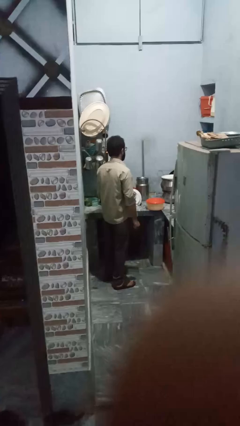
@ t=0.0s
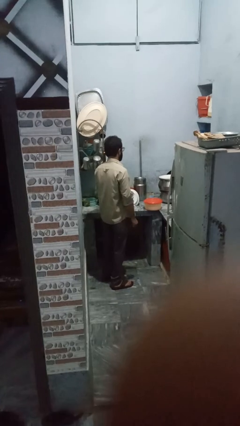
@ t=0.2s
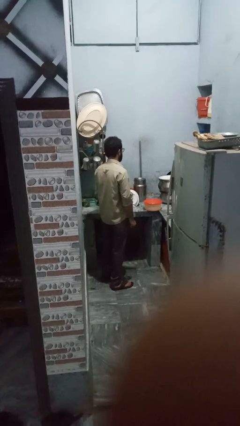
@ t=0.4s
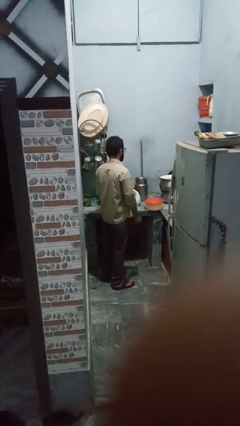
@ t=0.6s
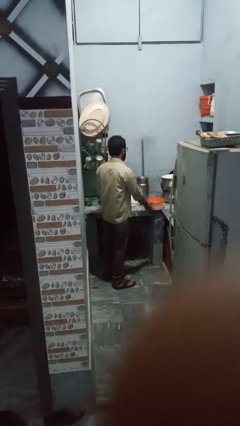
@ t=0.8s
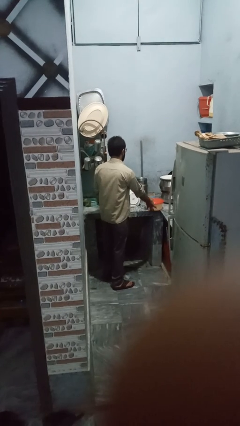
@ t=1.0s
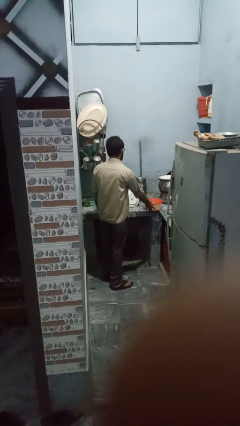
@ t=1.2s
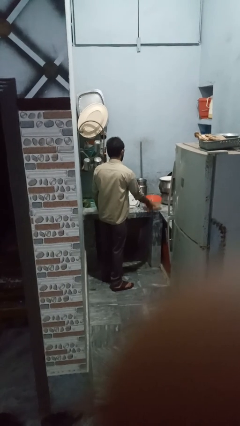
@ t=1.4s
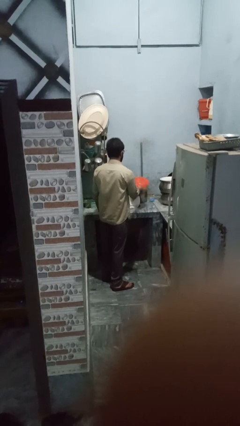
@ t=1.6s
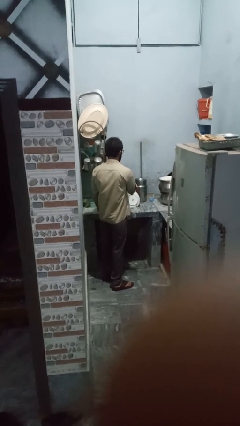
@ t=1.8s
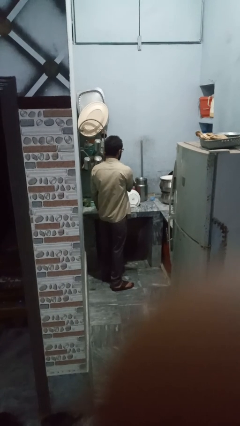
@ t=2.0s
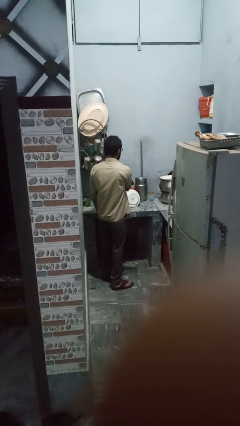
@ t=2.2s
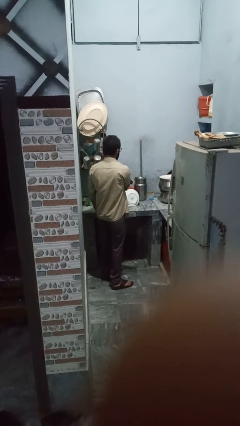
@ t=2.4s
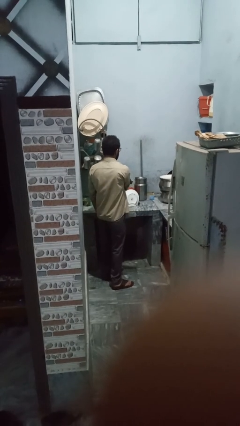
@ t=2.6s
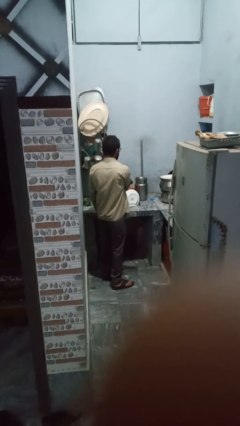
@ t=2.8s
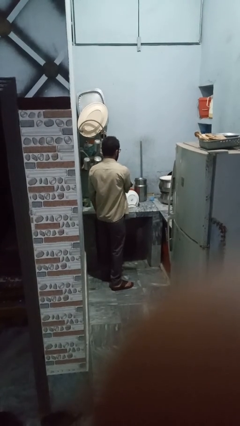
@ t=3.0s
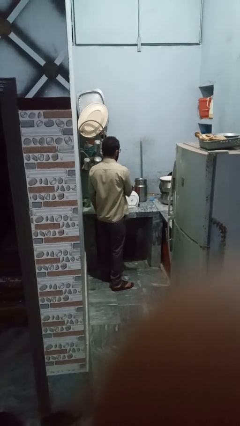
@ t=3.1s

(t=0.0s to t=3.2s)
person loads dishwasher

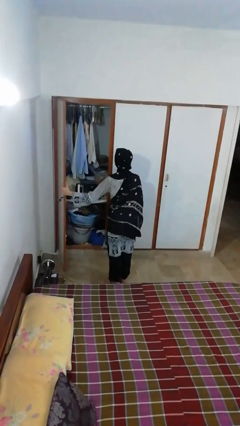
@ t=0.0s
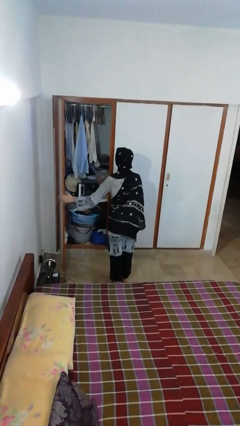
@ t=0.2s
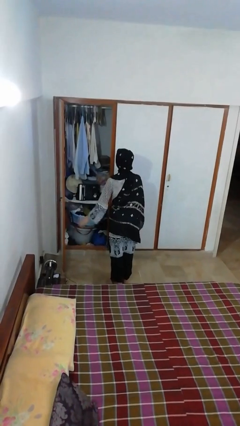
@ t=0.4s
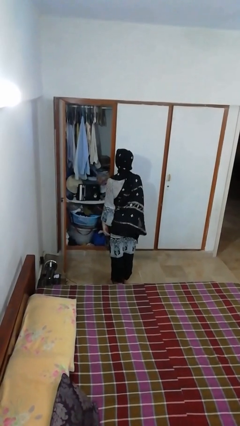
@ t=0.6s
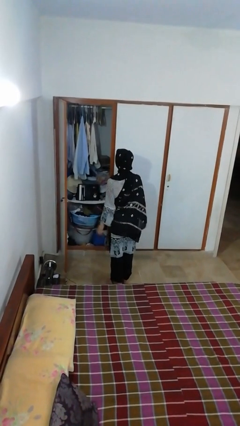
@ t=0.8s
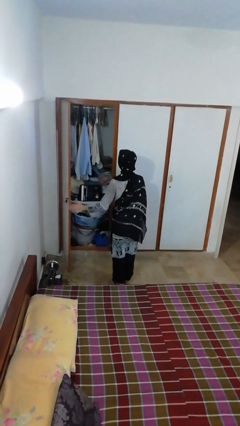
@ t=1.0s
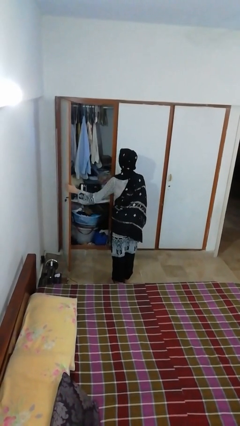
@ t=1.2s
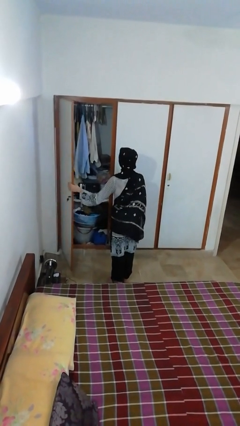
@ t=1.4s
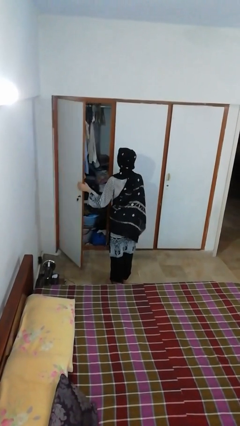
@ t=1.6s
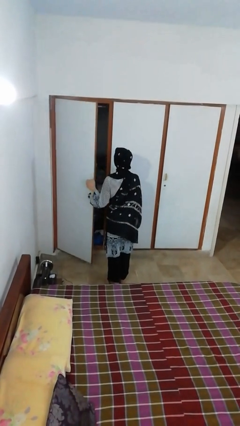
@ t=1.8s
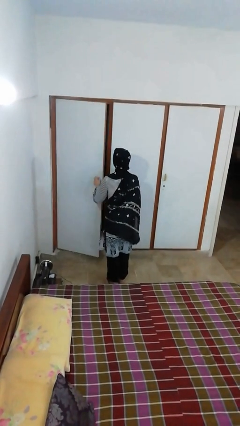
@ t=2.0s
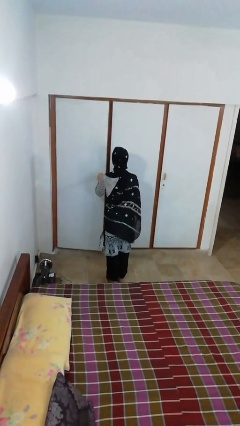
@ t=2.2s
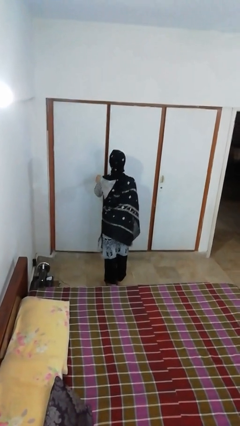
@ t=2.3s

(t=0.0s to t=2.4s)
person closes closet door

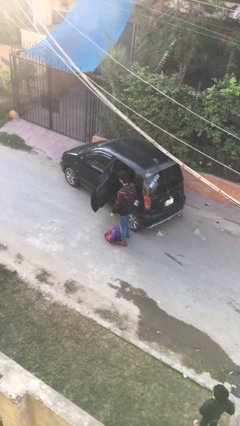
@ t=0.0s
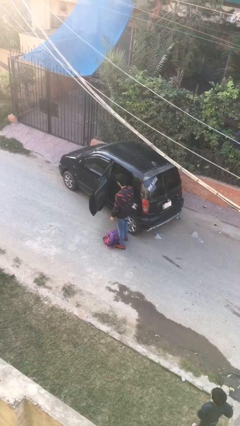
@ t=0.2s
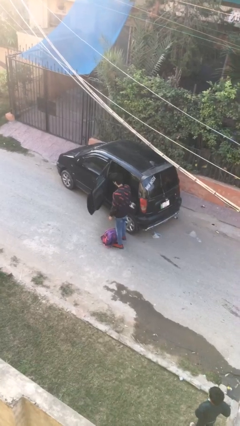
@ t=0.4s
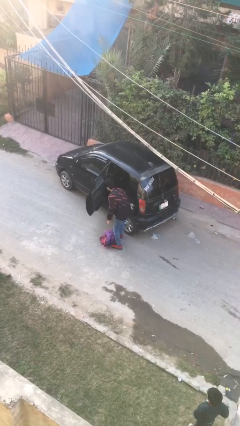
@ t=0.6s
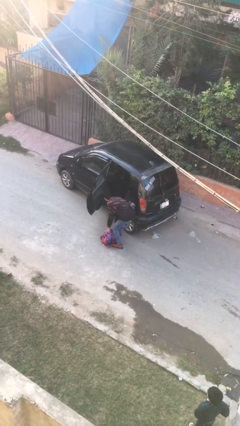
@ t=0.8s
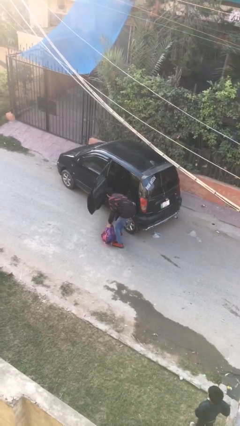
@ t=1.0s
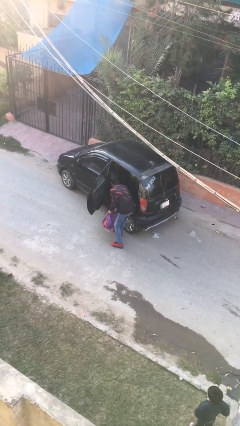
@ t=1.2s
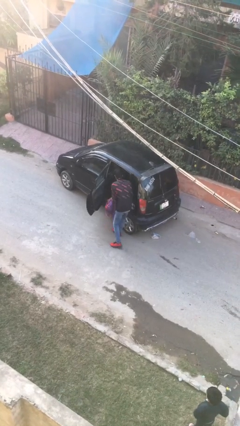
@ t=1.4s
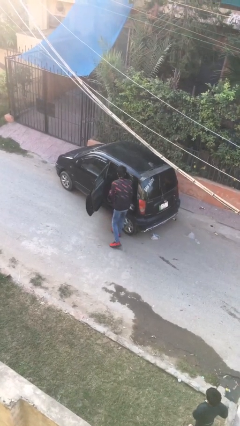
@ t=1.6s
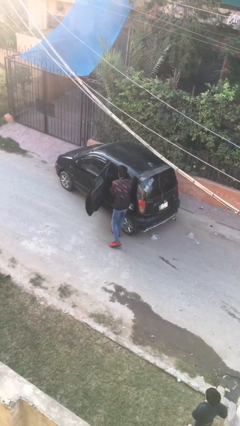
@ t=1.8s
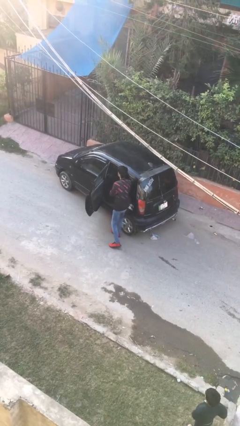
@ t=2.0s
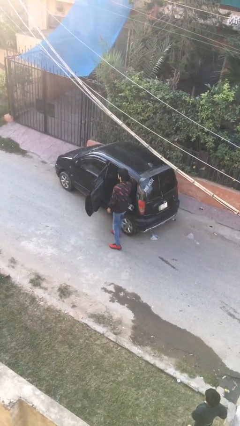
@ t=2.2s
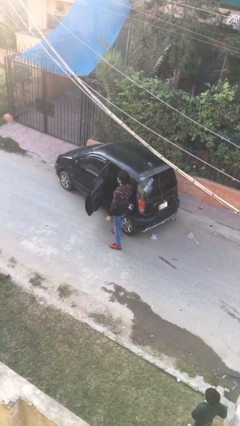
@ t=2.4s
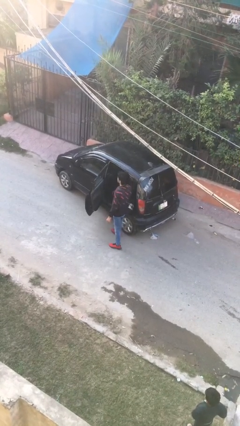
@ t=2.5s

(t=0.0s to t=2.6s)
person loads car

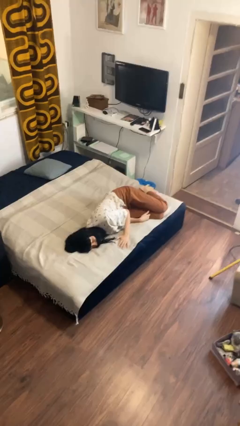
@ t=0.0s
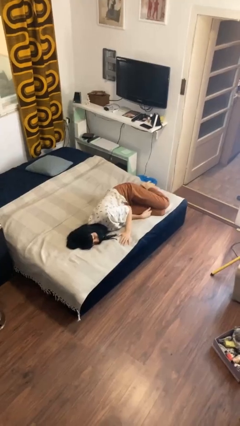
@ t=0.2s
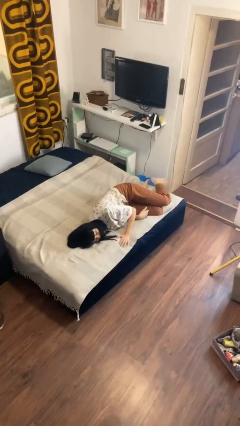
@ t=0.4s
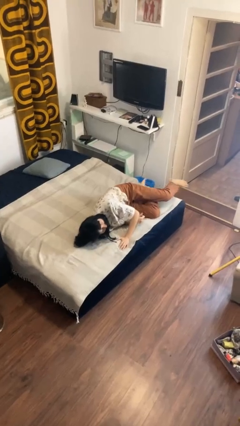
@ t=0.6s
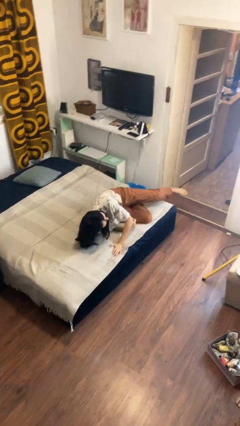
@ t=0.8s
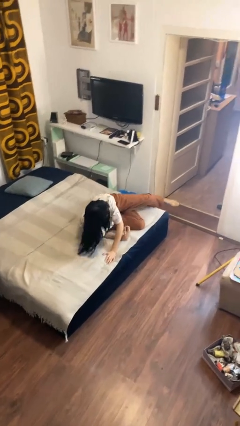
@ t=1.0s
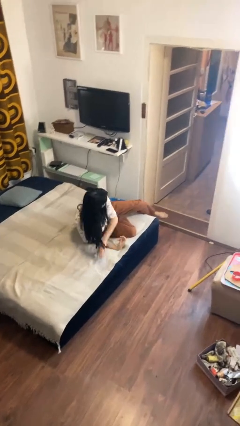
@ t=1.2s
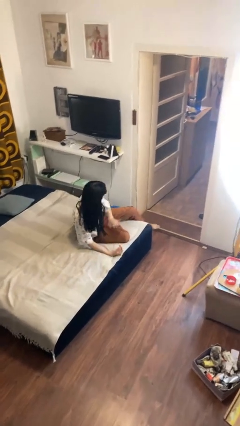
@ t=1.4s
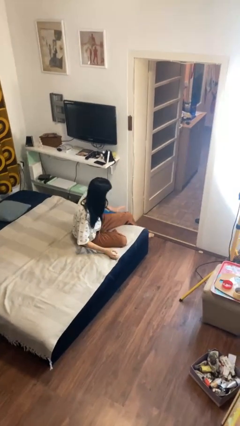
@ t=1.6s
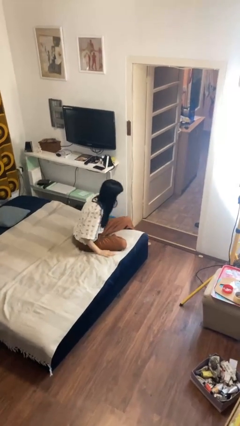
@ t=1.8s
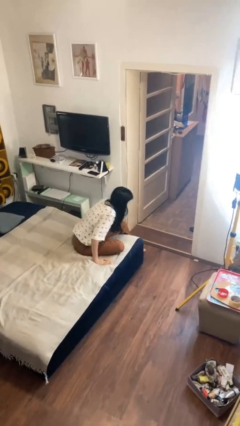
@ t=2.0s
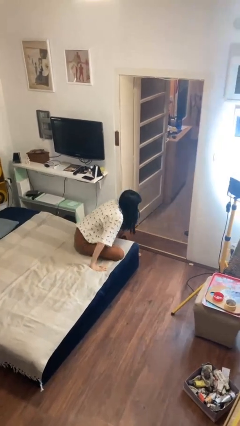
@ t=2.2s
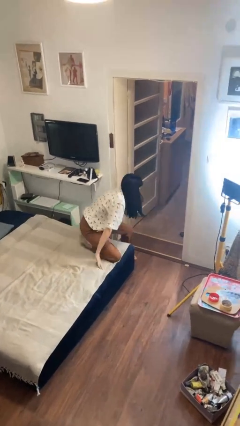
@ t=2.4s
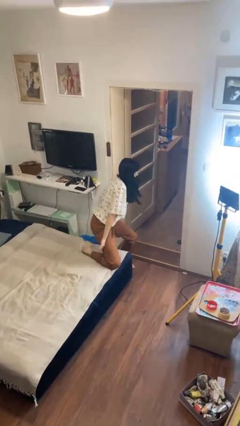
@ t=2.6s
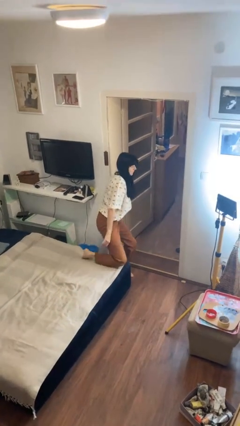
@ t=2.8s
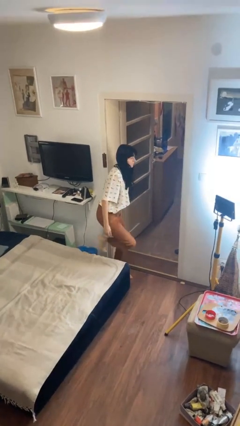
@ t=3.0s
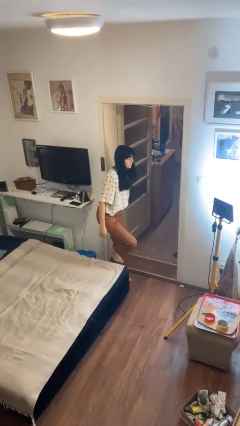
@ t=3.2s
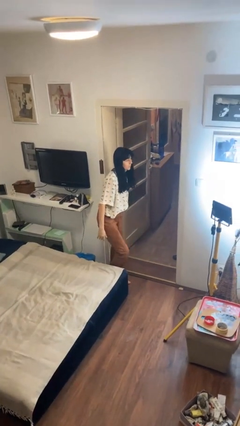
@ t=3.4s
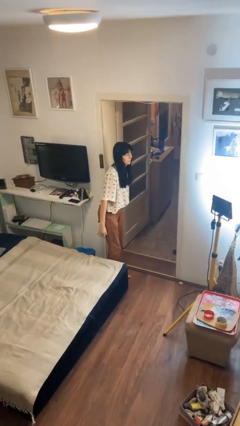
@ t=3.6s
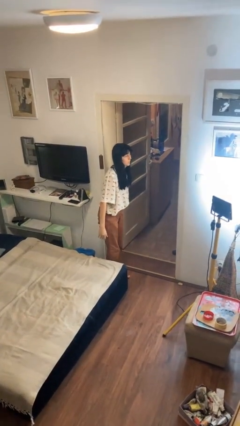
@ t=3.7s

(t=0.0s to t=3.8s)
person stands up

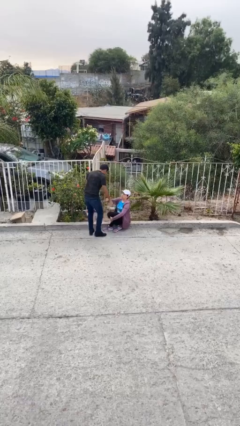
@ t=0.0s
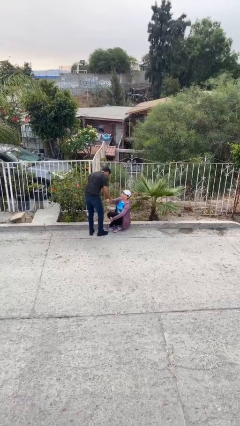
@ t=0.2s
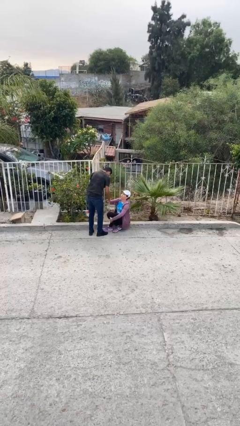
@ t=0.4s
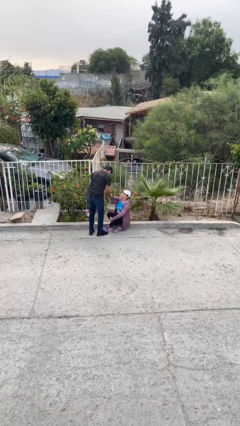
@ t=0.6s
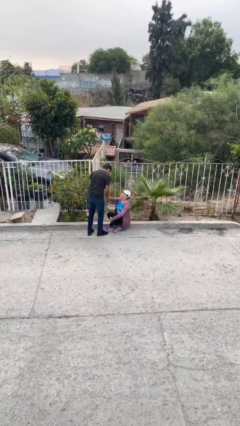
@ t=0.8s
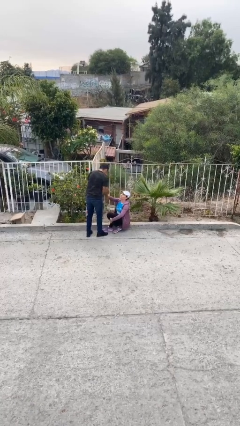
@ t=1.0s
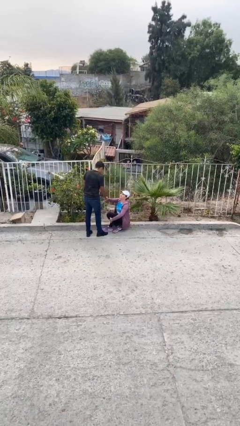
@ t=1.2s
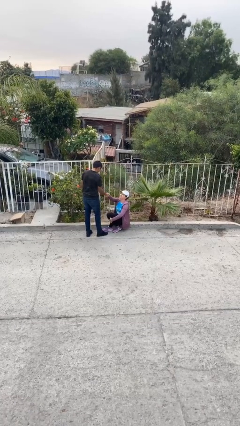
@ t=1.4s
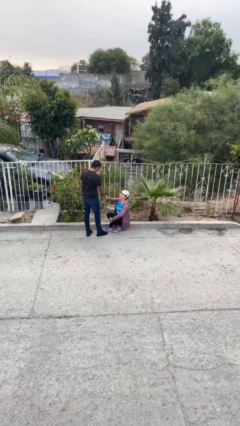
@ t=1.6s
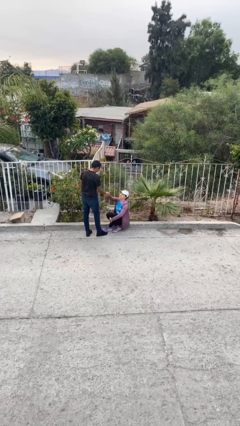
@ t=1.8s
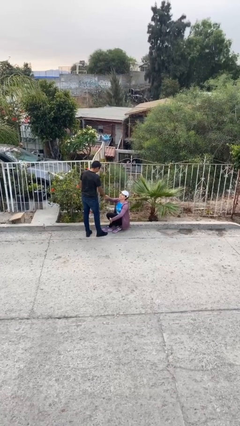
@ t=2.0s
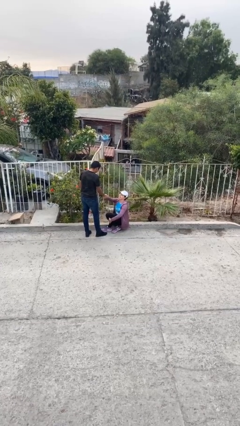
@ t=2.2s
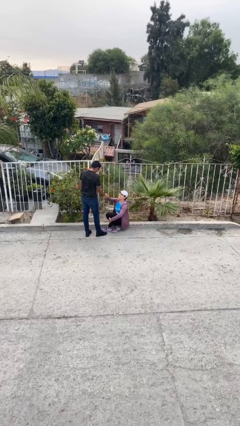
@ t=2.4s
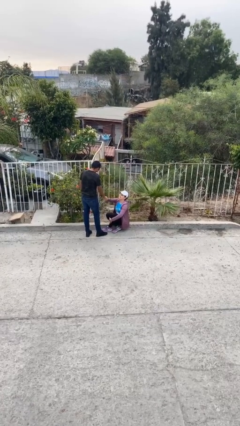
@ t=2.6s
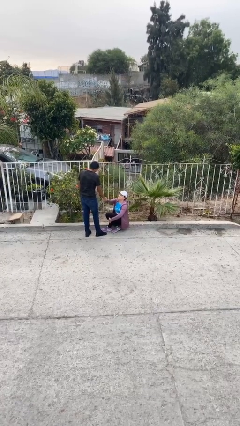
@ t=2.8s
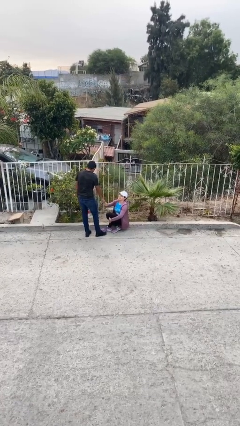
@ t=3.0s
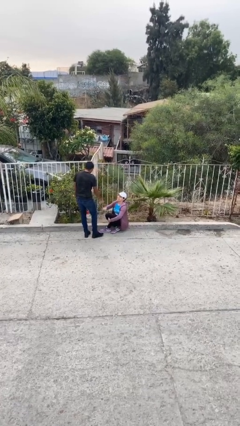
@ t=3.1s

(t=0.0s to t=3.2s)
person shakes hand

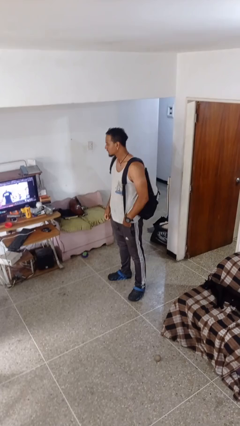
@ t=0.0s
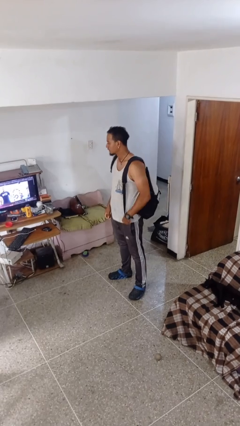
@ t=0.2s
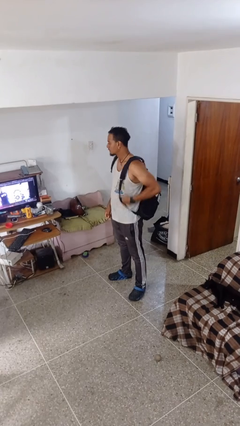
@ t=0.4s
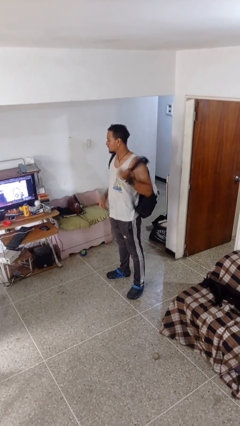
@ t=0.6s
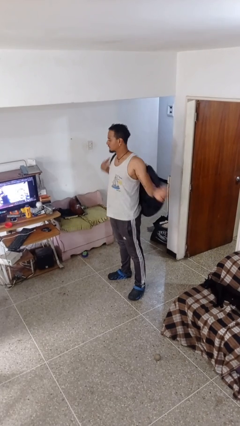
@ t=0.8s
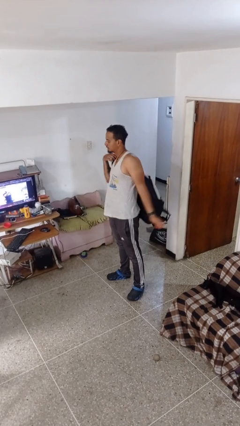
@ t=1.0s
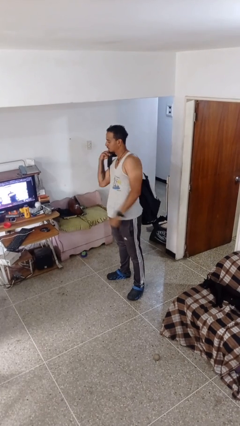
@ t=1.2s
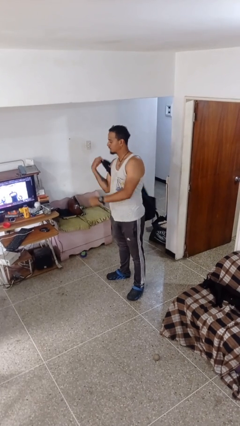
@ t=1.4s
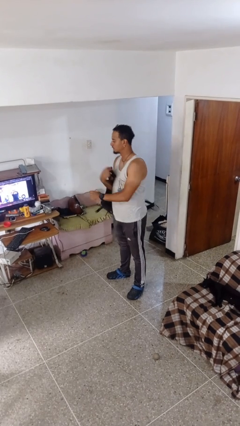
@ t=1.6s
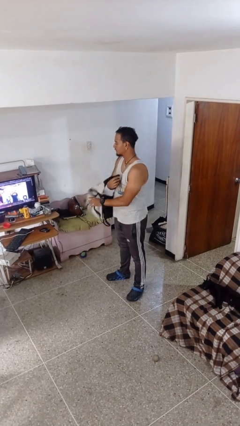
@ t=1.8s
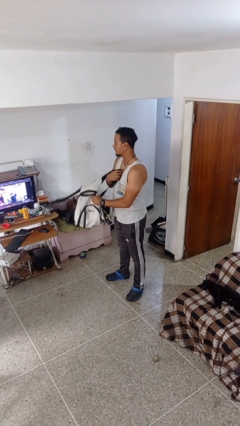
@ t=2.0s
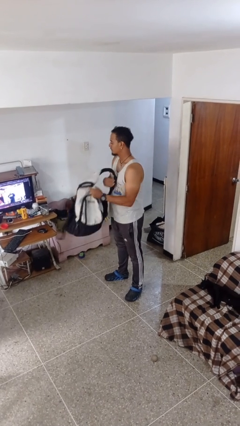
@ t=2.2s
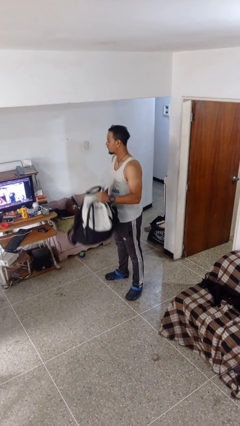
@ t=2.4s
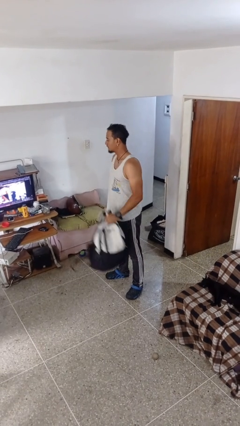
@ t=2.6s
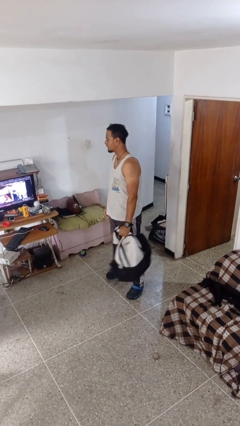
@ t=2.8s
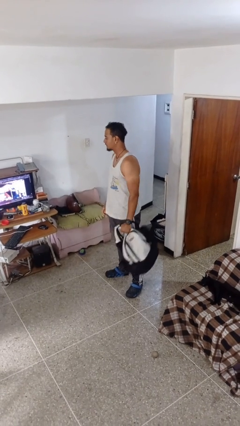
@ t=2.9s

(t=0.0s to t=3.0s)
person takes off backpack
